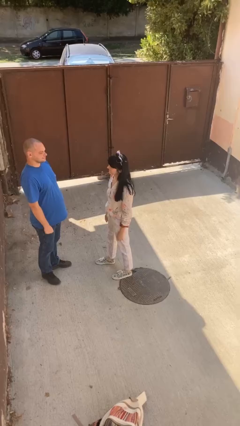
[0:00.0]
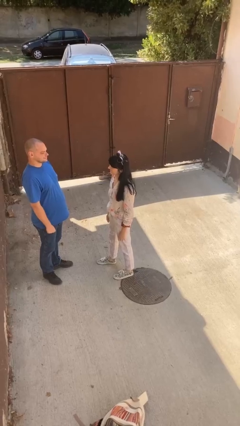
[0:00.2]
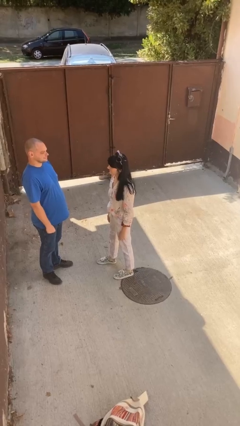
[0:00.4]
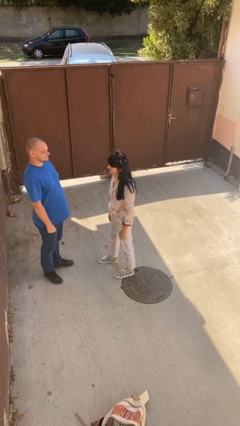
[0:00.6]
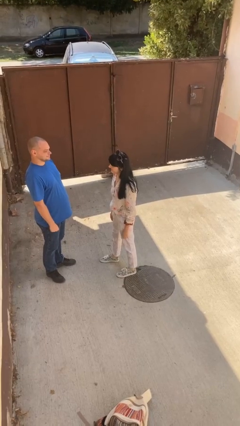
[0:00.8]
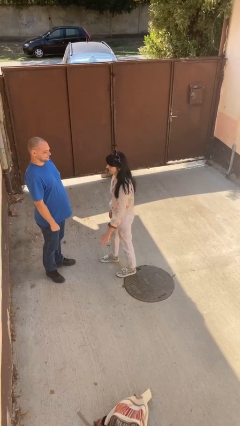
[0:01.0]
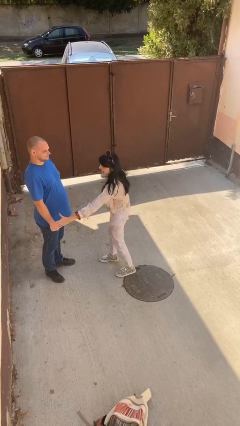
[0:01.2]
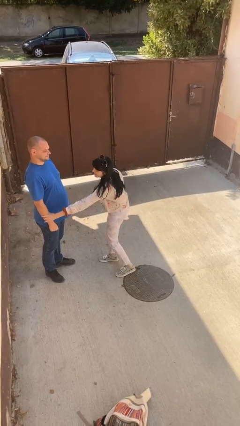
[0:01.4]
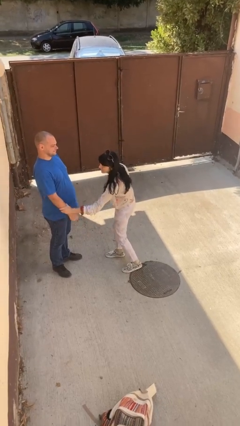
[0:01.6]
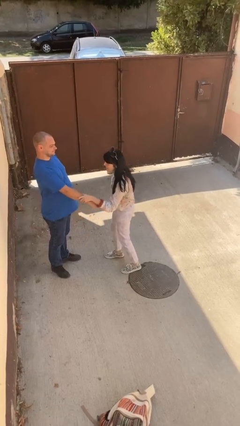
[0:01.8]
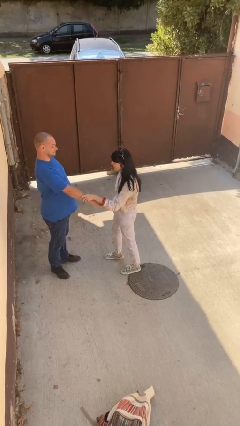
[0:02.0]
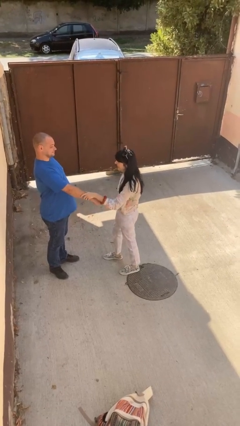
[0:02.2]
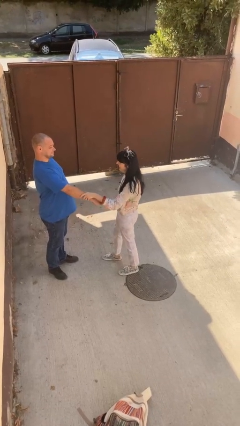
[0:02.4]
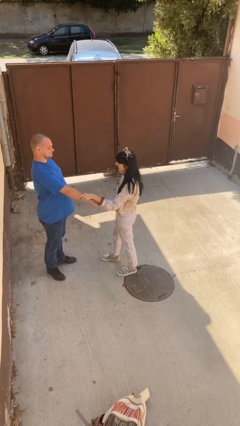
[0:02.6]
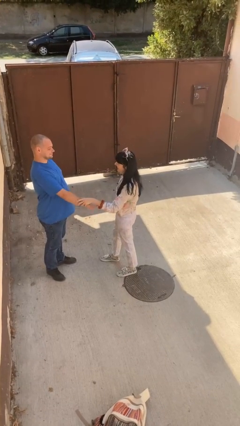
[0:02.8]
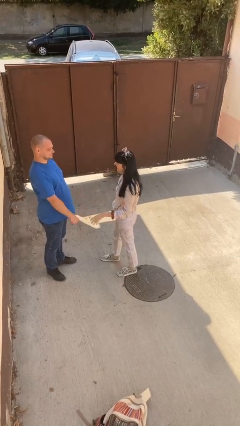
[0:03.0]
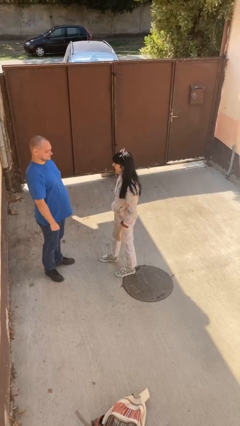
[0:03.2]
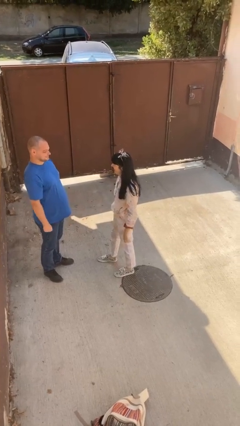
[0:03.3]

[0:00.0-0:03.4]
person grabs person by forearm

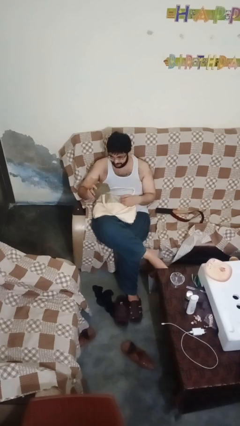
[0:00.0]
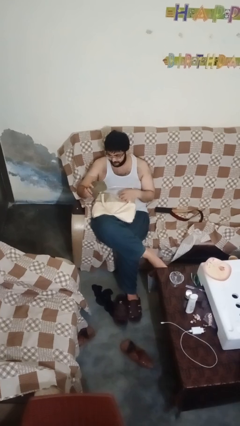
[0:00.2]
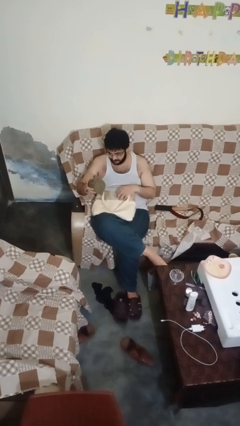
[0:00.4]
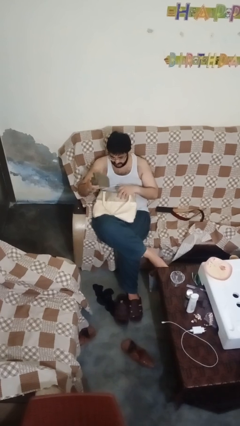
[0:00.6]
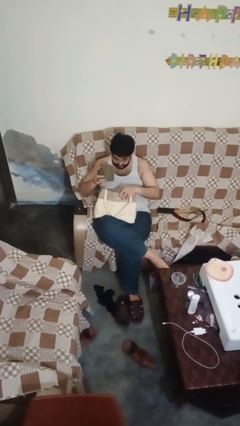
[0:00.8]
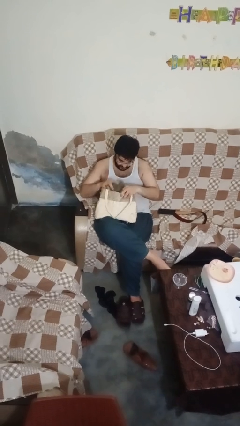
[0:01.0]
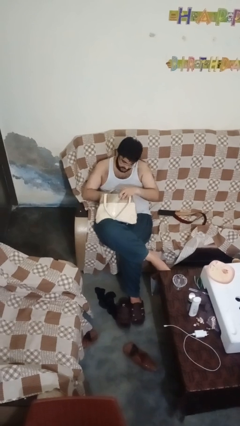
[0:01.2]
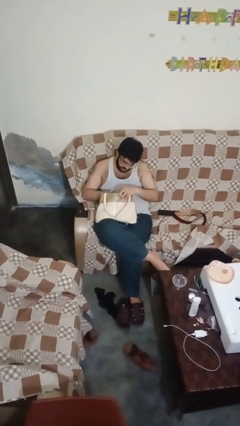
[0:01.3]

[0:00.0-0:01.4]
person puts object into purse

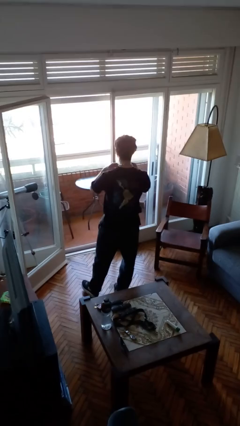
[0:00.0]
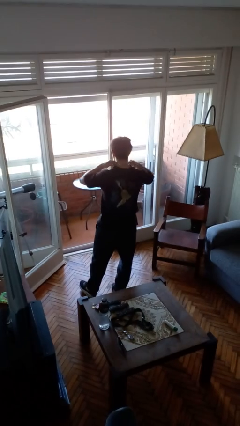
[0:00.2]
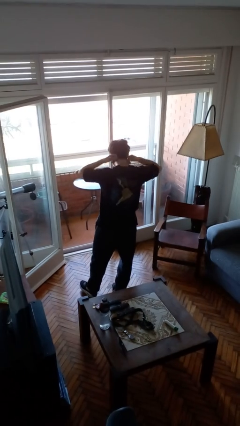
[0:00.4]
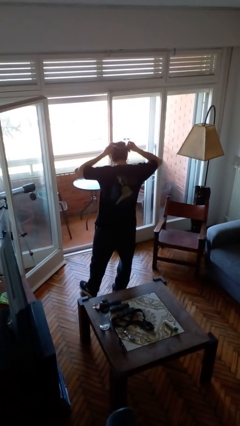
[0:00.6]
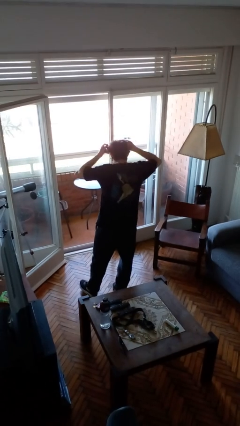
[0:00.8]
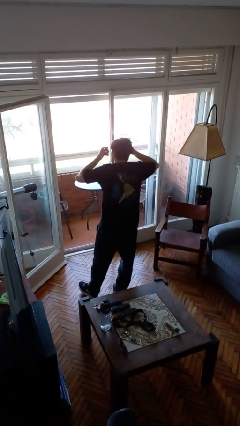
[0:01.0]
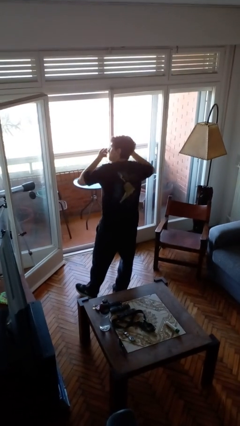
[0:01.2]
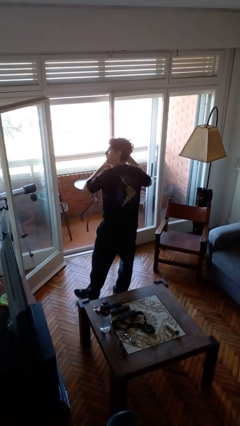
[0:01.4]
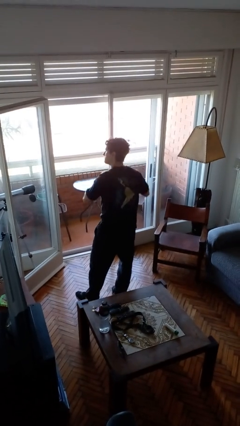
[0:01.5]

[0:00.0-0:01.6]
person takes off necklace

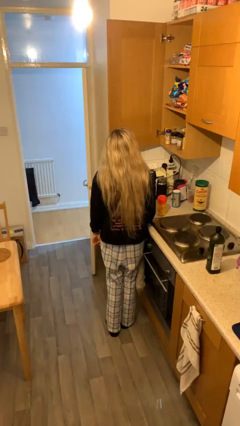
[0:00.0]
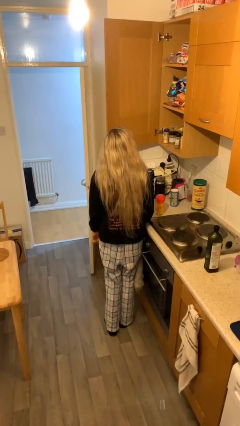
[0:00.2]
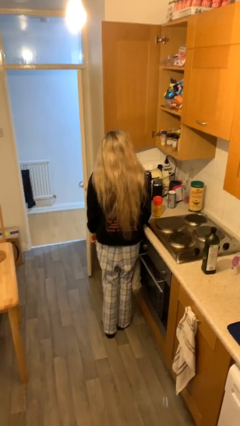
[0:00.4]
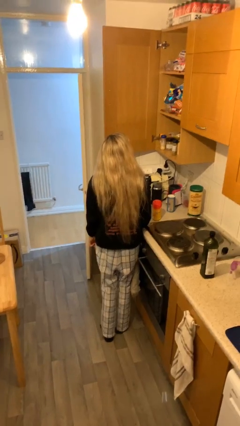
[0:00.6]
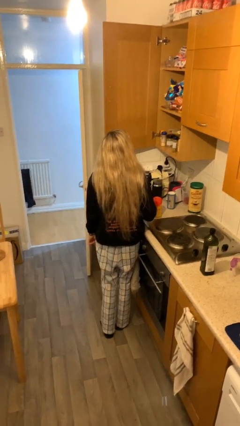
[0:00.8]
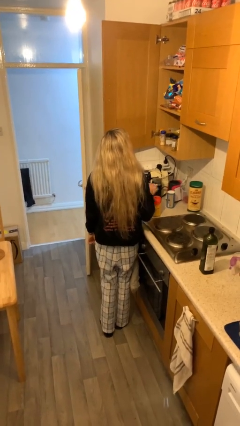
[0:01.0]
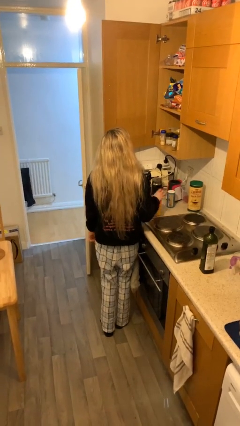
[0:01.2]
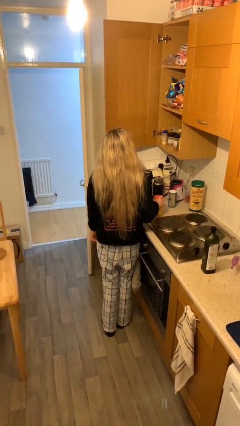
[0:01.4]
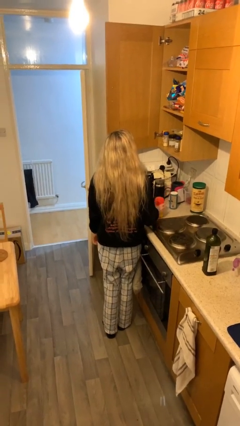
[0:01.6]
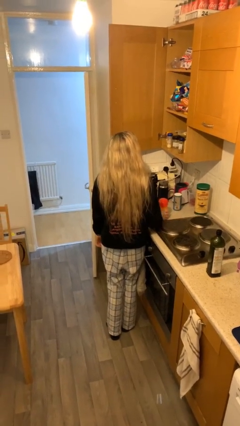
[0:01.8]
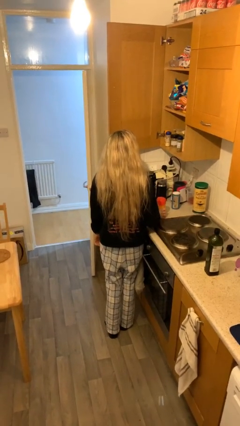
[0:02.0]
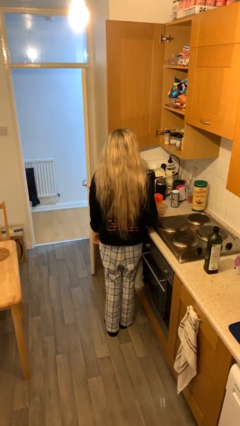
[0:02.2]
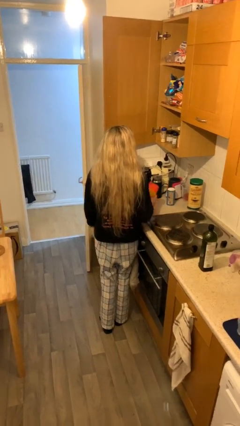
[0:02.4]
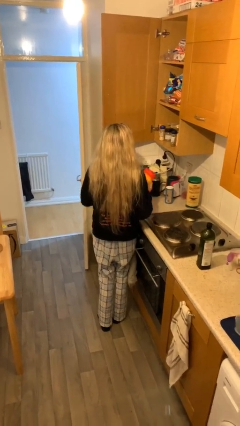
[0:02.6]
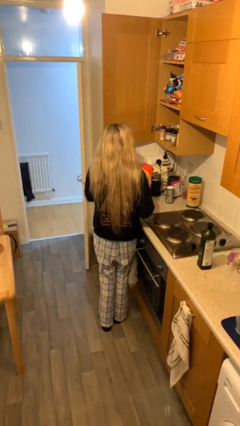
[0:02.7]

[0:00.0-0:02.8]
person picks up object from table

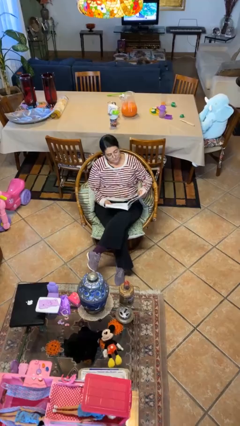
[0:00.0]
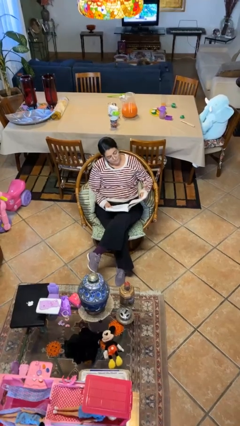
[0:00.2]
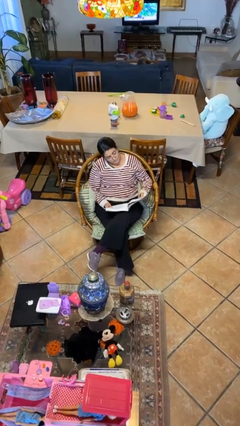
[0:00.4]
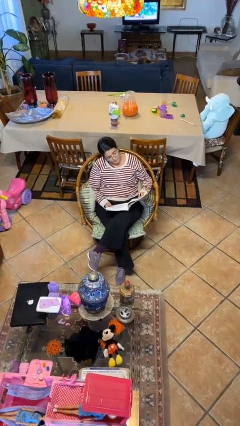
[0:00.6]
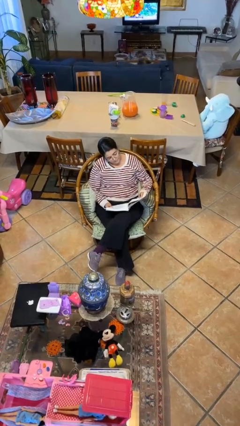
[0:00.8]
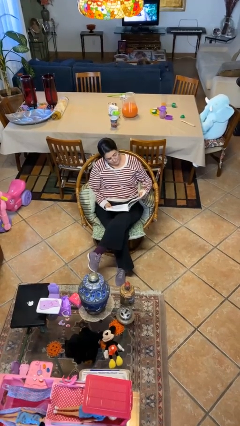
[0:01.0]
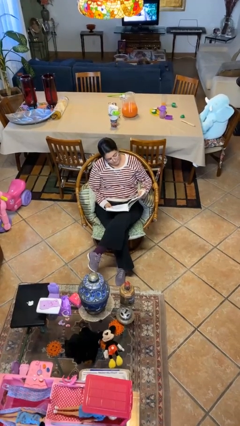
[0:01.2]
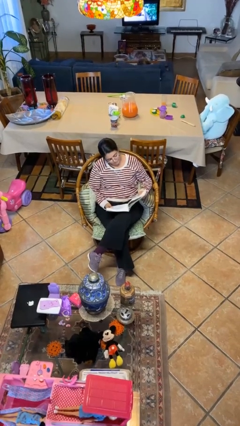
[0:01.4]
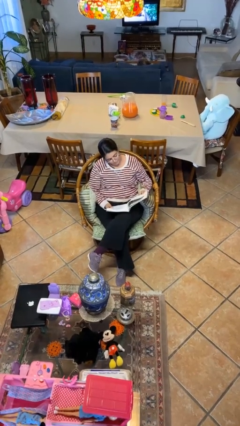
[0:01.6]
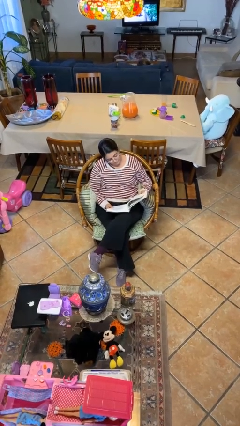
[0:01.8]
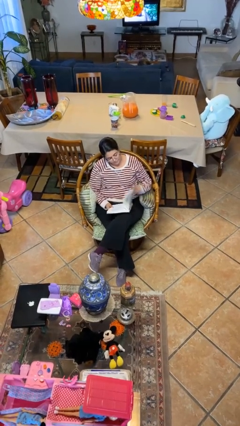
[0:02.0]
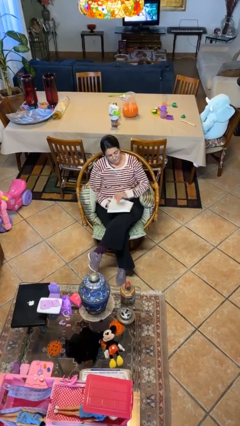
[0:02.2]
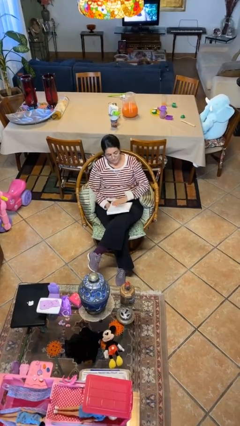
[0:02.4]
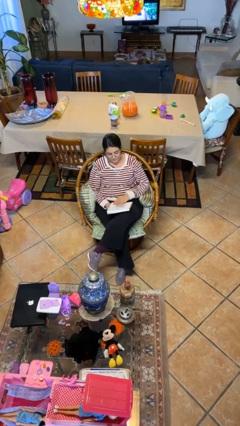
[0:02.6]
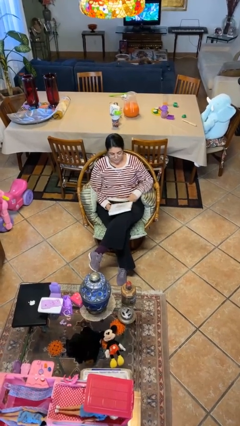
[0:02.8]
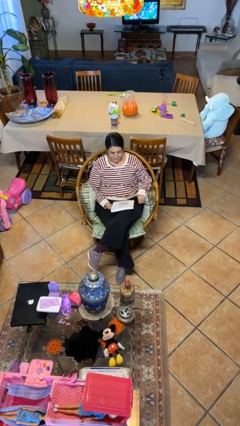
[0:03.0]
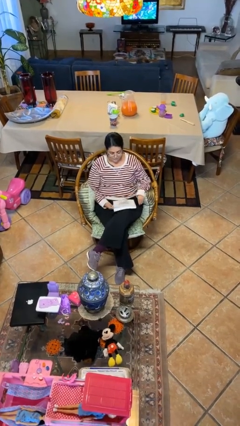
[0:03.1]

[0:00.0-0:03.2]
person reads document

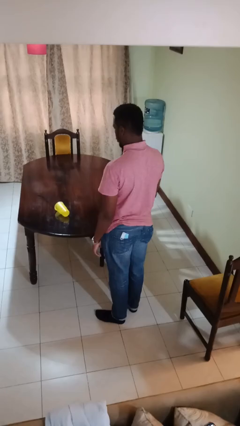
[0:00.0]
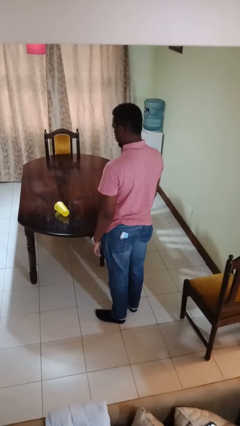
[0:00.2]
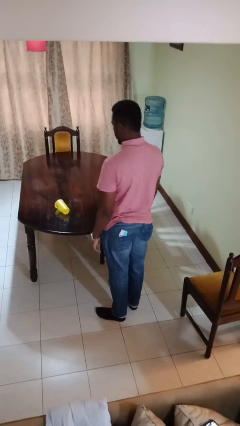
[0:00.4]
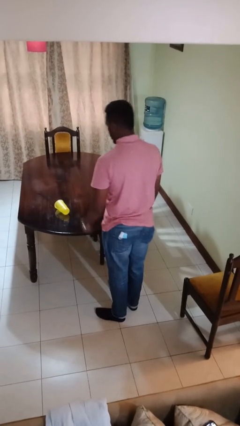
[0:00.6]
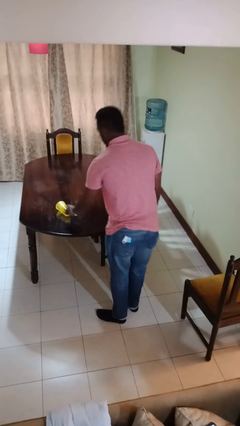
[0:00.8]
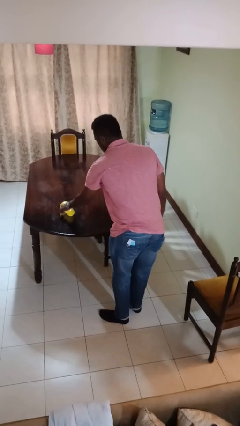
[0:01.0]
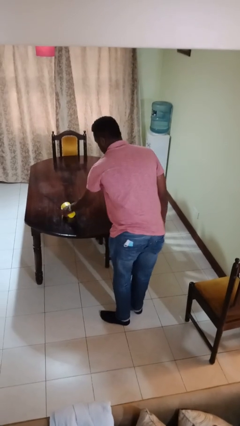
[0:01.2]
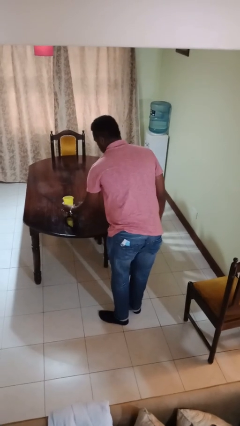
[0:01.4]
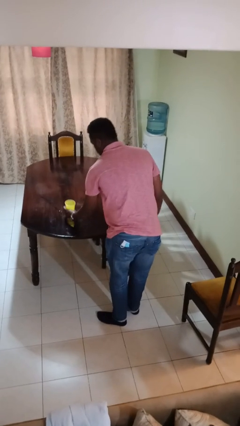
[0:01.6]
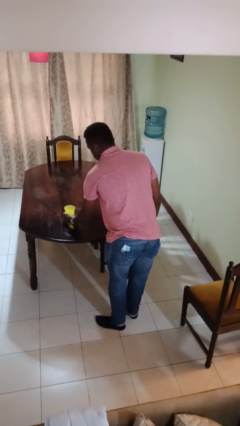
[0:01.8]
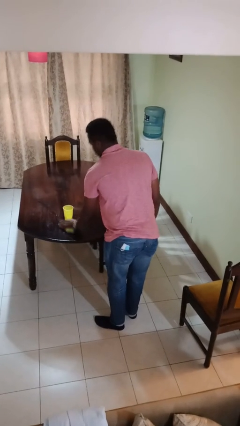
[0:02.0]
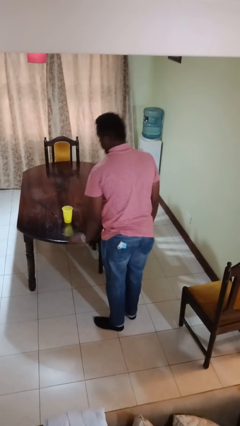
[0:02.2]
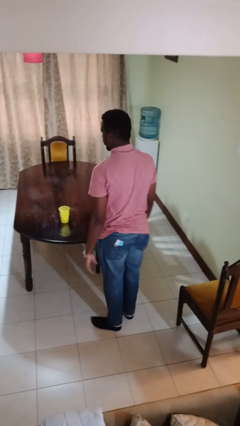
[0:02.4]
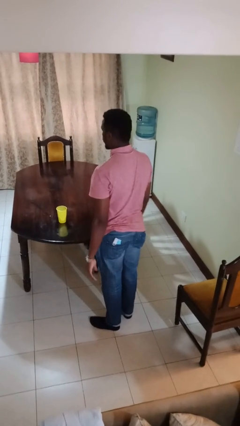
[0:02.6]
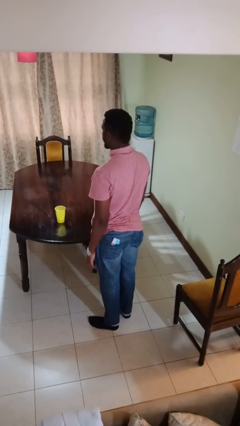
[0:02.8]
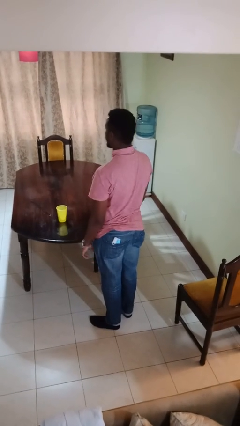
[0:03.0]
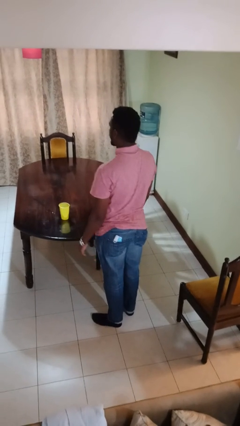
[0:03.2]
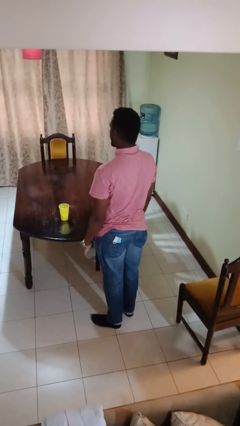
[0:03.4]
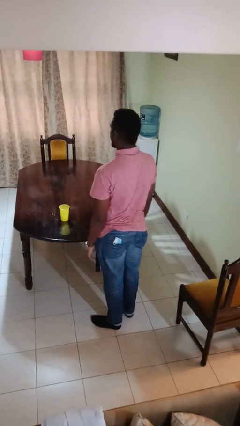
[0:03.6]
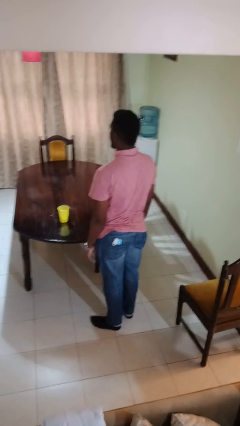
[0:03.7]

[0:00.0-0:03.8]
person sets upright glass

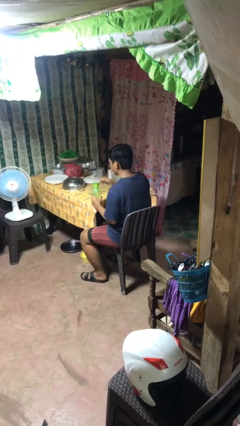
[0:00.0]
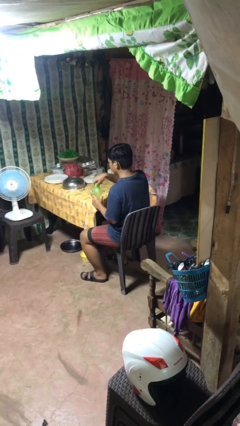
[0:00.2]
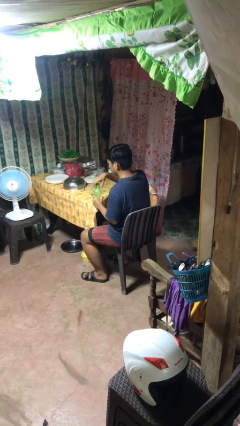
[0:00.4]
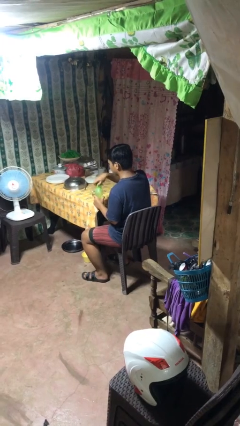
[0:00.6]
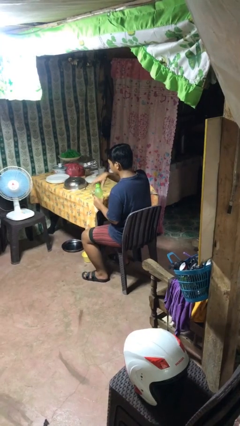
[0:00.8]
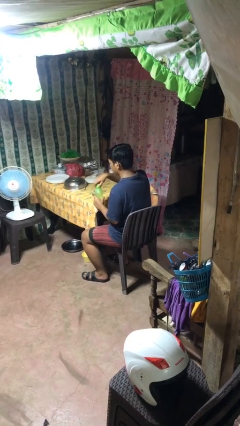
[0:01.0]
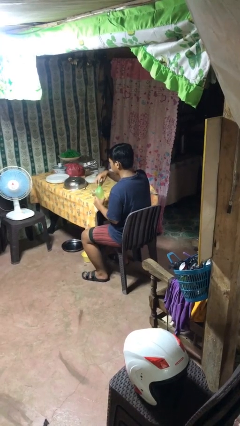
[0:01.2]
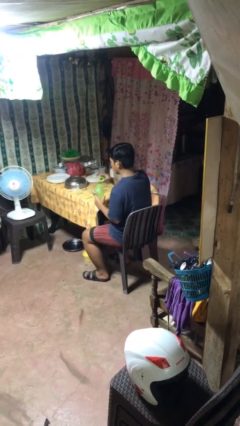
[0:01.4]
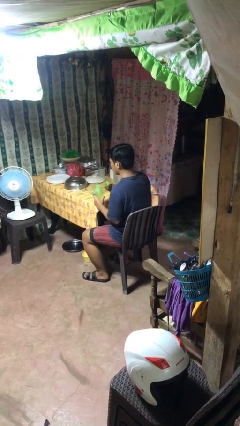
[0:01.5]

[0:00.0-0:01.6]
person unscrews lid from bottle
